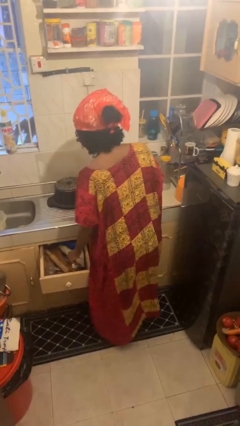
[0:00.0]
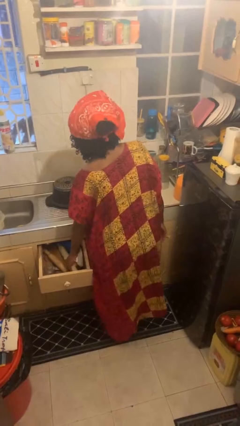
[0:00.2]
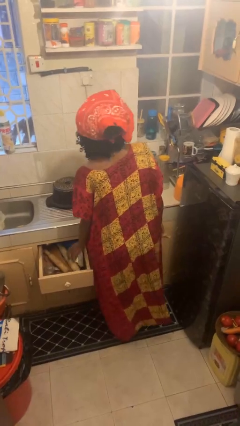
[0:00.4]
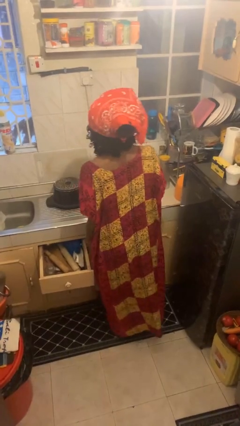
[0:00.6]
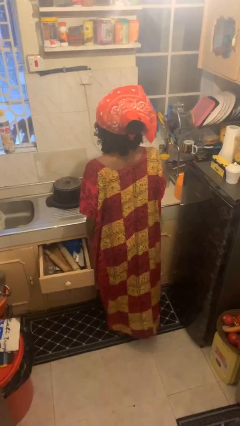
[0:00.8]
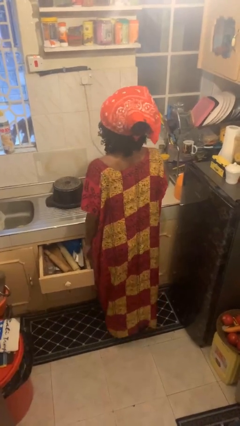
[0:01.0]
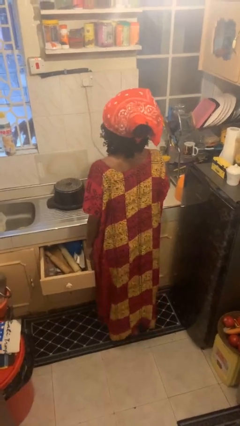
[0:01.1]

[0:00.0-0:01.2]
person puts object into kitchen drawer

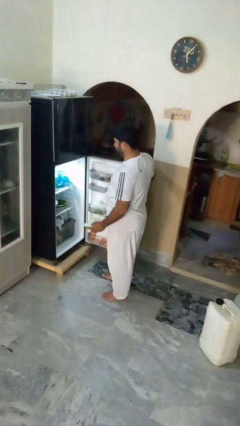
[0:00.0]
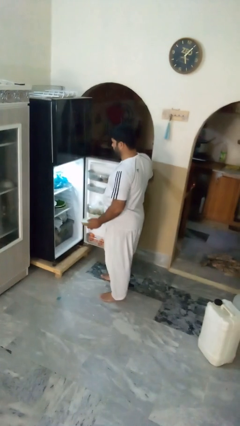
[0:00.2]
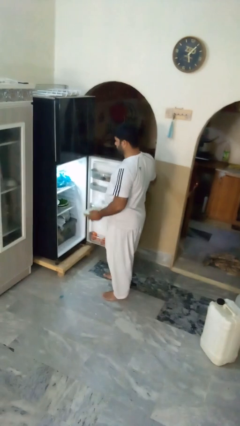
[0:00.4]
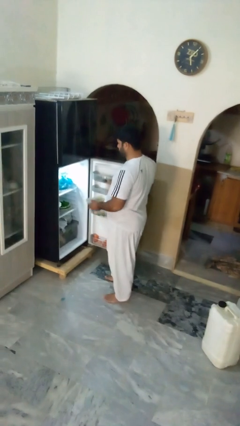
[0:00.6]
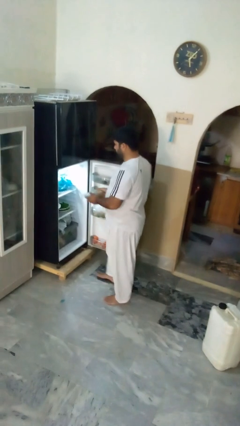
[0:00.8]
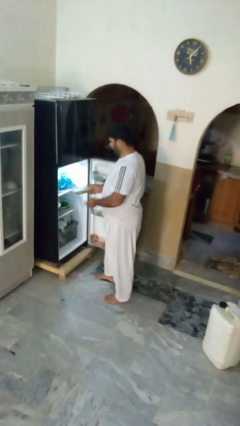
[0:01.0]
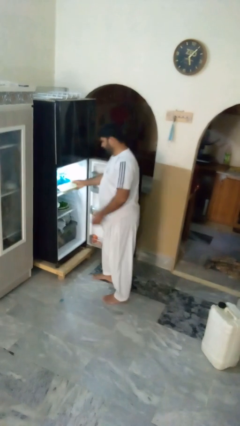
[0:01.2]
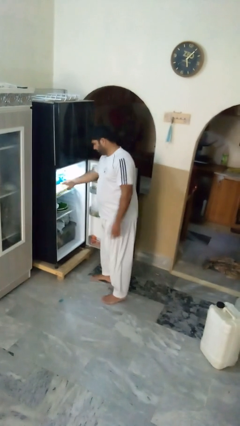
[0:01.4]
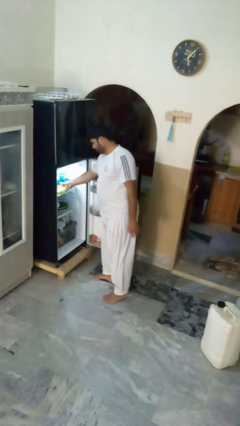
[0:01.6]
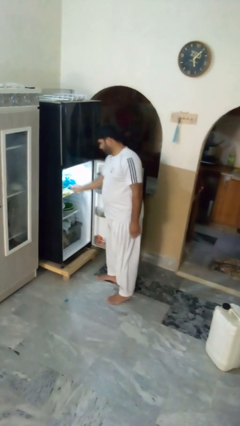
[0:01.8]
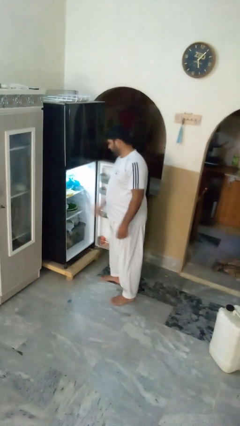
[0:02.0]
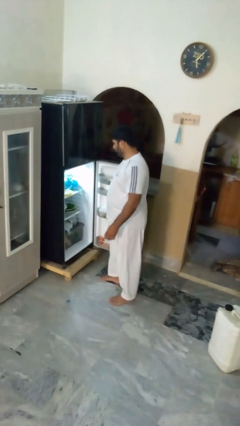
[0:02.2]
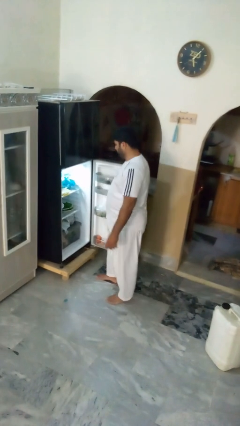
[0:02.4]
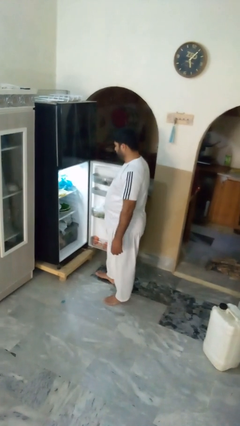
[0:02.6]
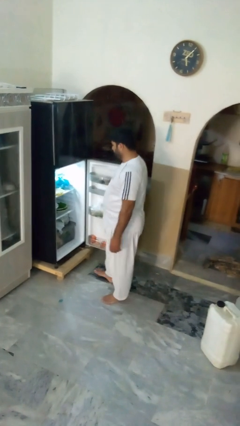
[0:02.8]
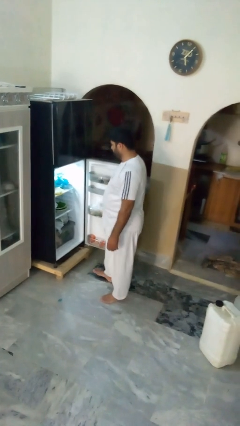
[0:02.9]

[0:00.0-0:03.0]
person puts object into refrigerator

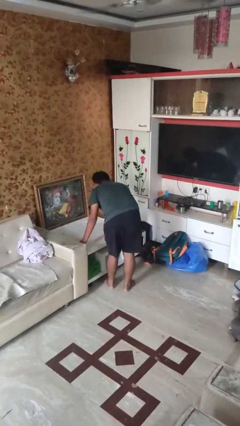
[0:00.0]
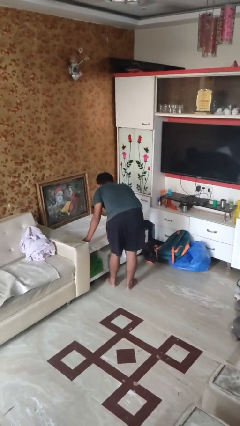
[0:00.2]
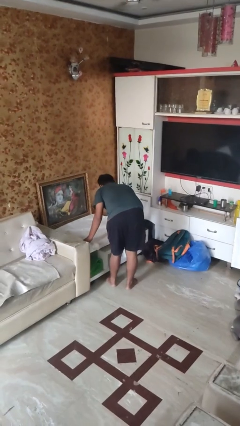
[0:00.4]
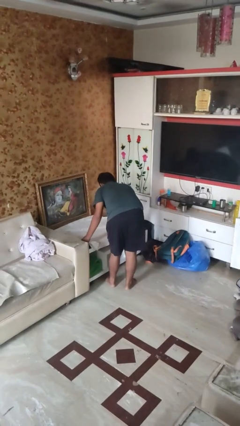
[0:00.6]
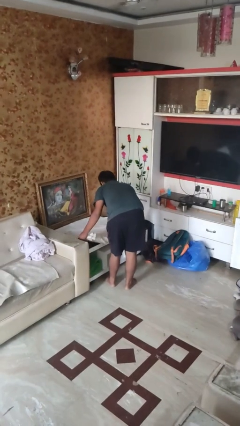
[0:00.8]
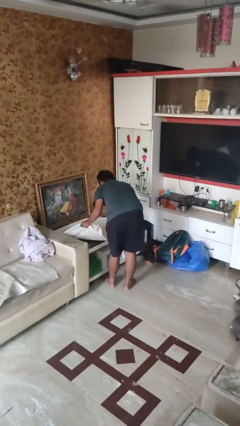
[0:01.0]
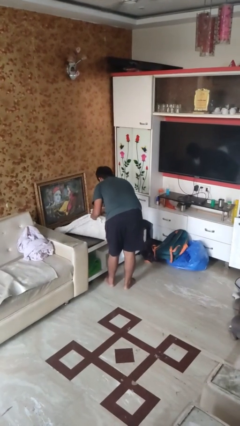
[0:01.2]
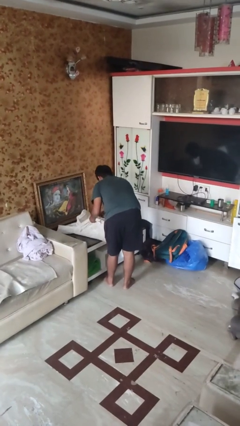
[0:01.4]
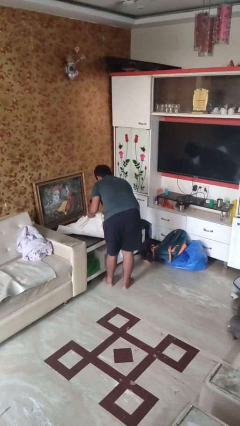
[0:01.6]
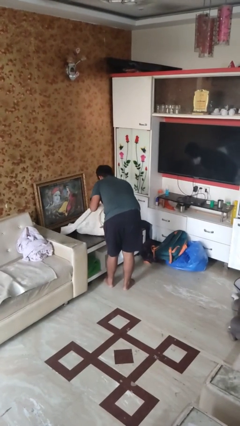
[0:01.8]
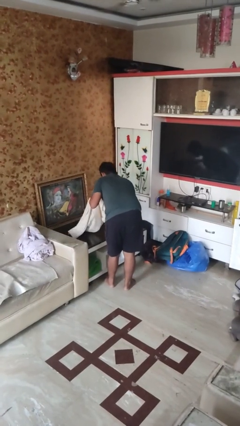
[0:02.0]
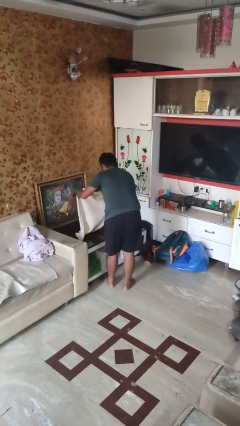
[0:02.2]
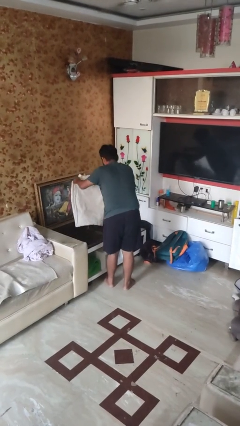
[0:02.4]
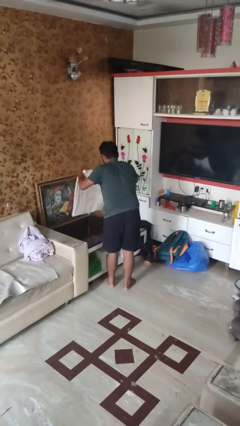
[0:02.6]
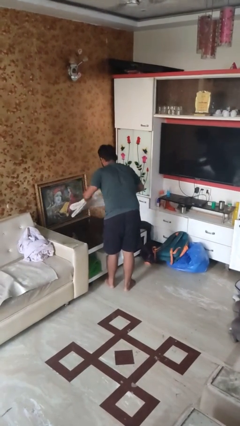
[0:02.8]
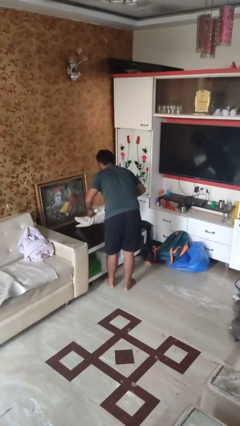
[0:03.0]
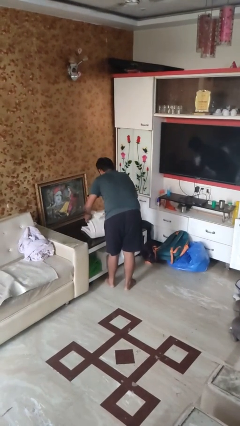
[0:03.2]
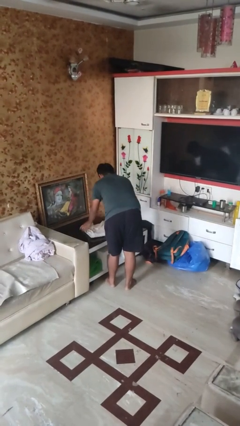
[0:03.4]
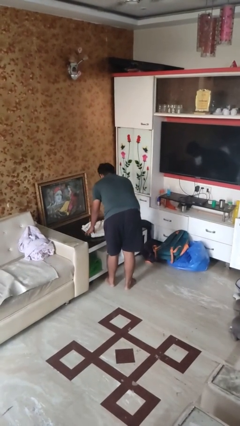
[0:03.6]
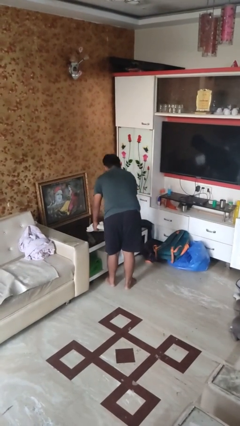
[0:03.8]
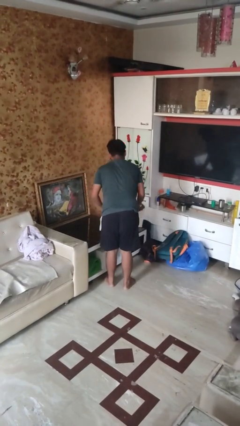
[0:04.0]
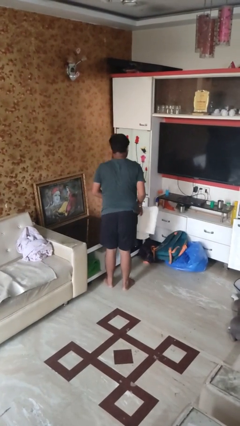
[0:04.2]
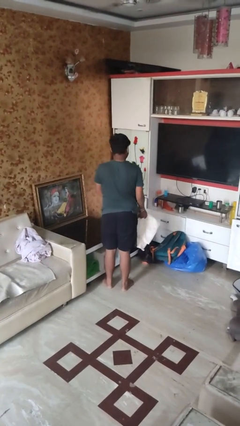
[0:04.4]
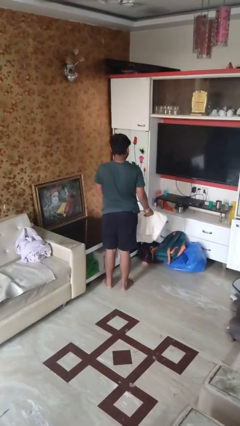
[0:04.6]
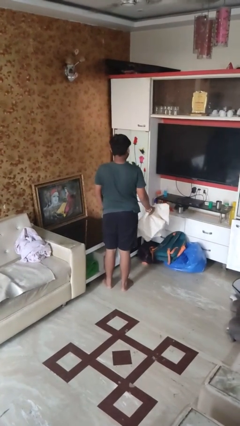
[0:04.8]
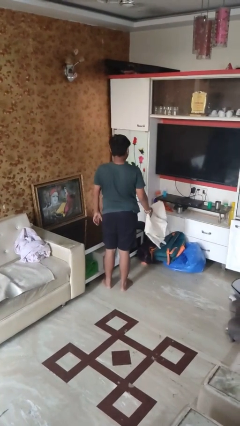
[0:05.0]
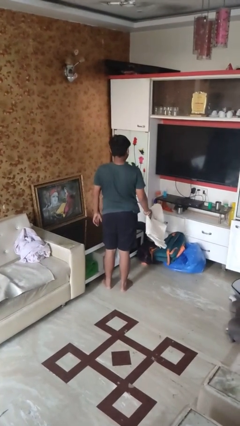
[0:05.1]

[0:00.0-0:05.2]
person folds tablecloth

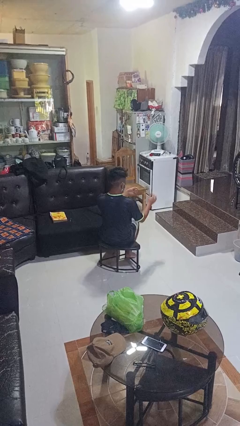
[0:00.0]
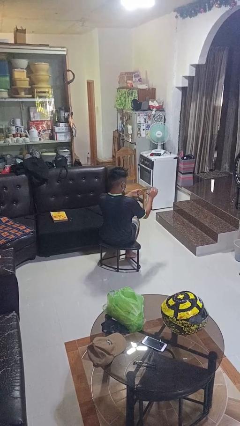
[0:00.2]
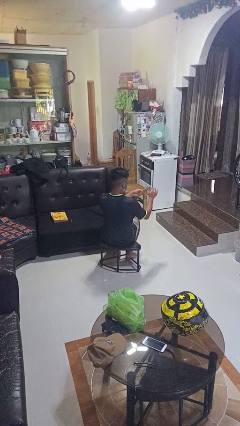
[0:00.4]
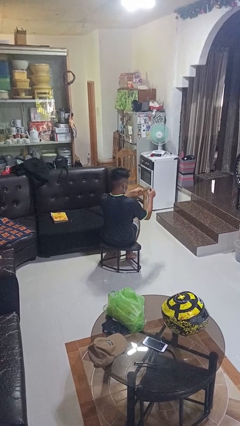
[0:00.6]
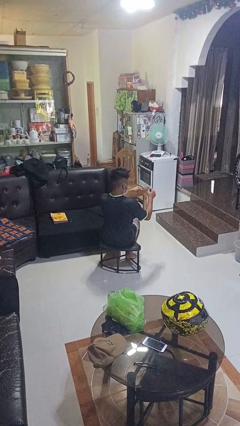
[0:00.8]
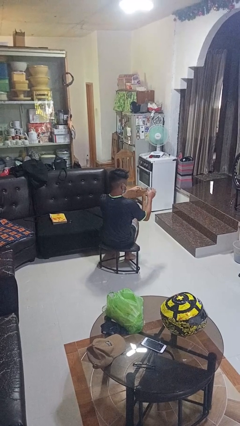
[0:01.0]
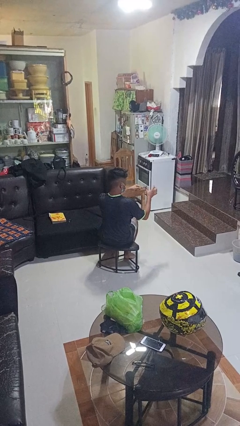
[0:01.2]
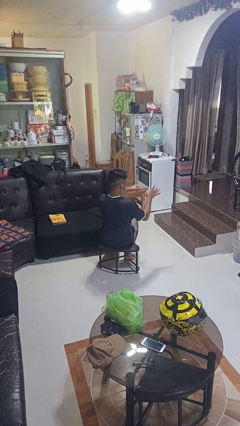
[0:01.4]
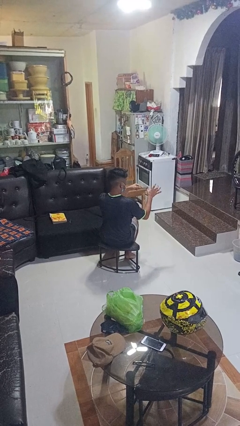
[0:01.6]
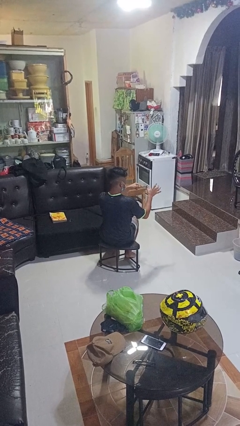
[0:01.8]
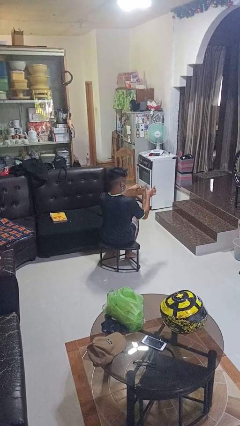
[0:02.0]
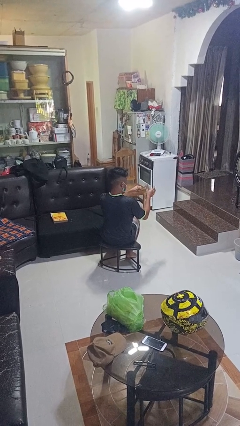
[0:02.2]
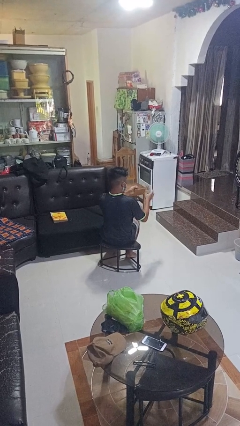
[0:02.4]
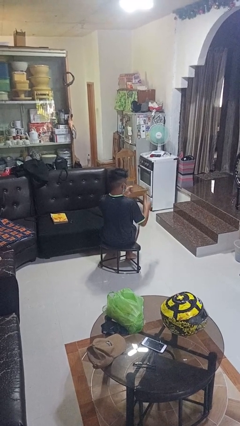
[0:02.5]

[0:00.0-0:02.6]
person files fingernails

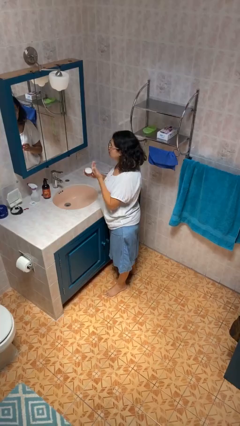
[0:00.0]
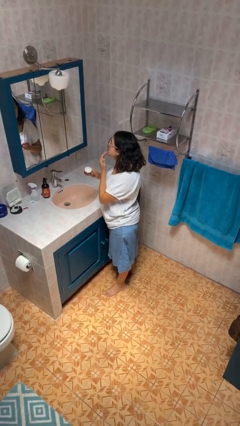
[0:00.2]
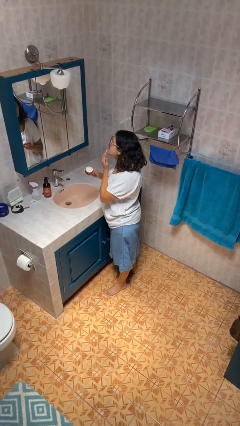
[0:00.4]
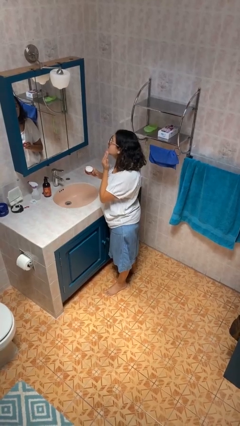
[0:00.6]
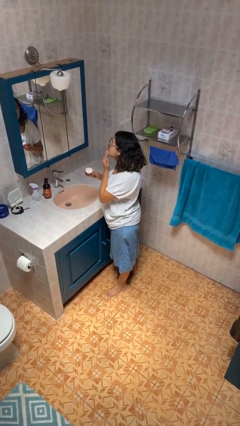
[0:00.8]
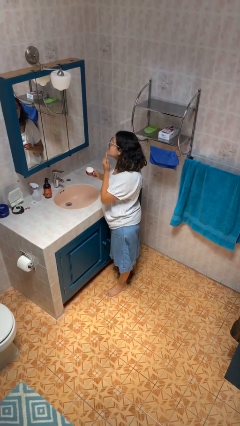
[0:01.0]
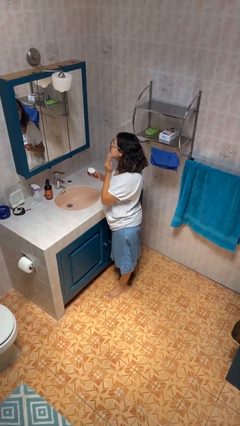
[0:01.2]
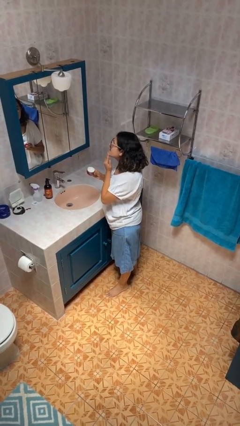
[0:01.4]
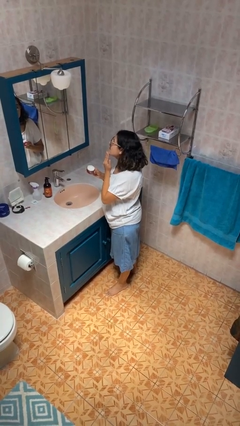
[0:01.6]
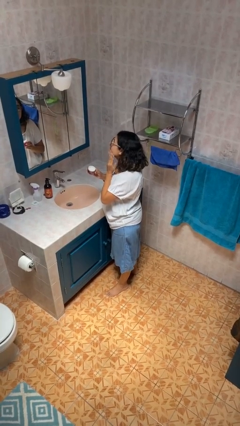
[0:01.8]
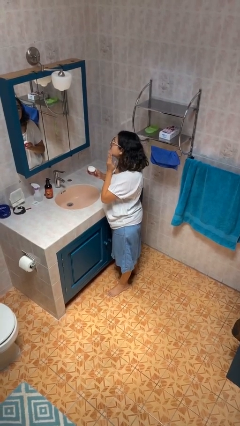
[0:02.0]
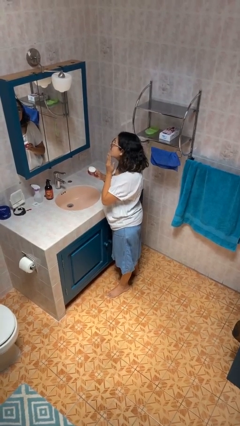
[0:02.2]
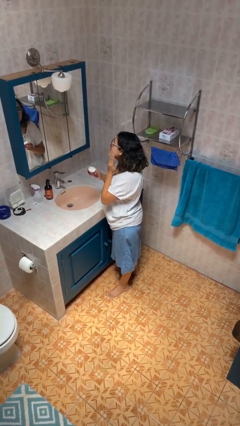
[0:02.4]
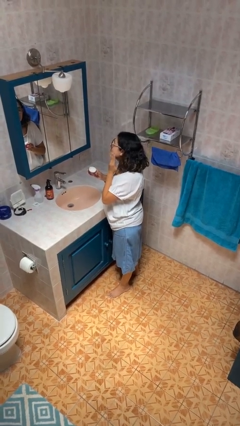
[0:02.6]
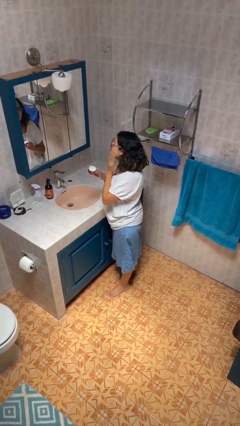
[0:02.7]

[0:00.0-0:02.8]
person applies facial moisturizer

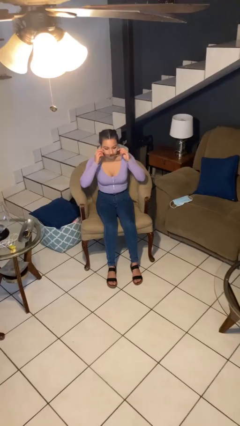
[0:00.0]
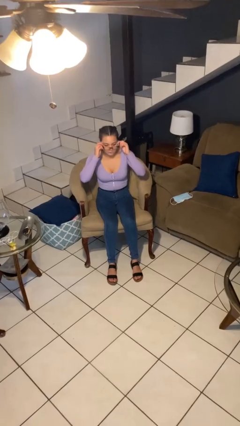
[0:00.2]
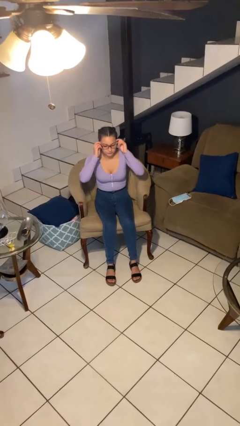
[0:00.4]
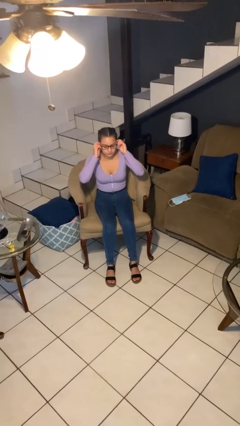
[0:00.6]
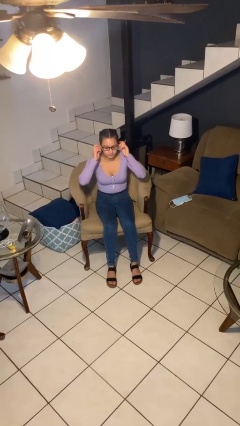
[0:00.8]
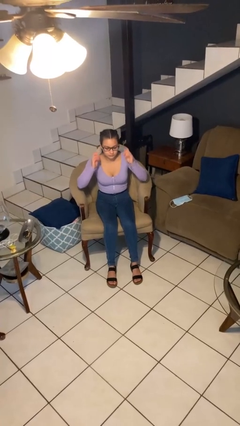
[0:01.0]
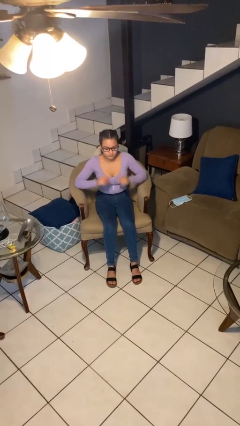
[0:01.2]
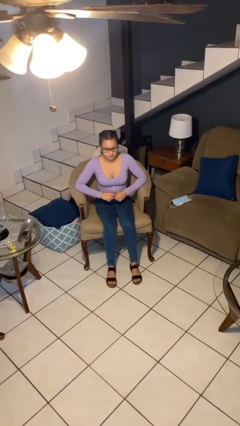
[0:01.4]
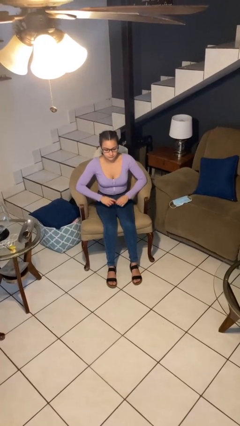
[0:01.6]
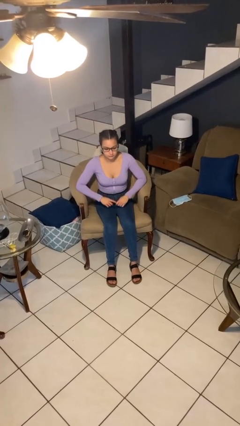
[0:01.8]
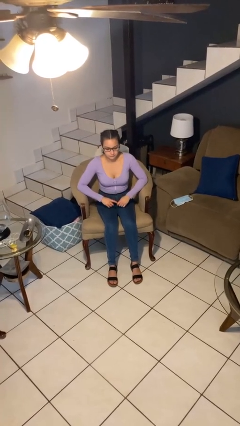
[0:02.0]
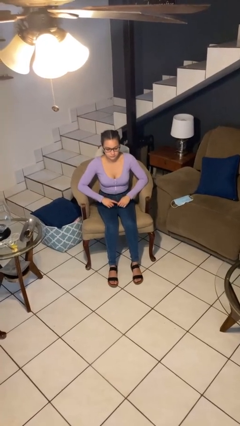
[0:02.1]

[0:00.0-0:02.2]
person puts on glasses

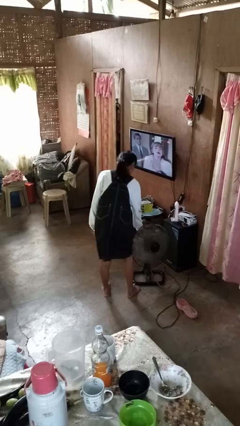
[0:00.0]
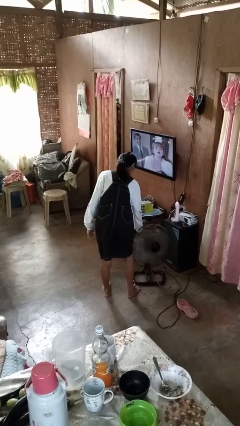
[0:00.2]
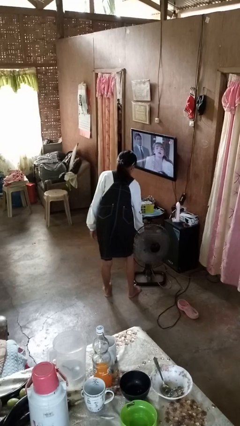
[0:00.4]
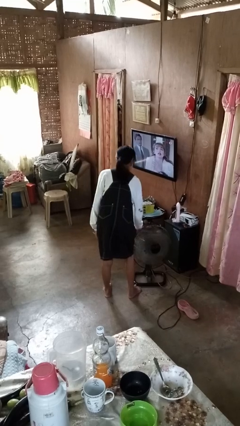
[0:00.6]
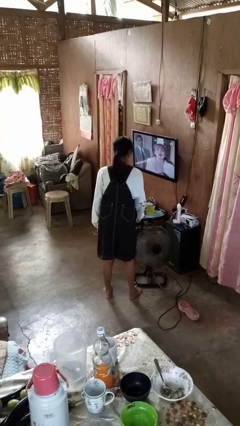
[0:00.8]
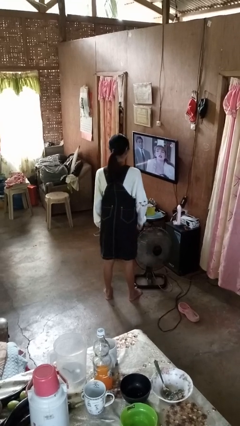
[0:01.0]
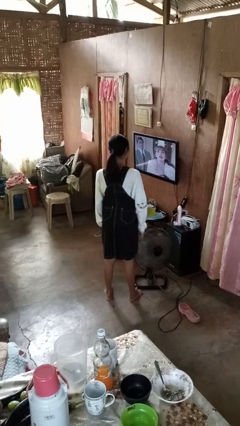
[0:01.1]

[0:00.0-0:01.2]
person turns off fan
